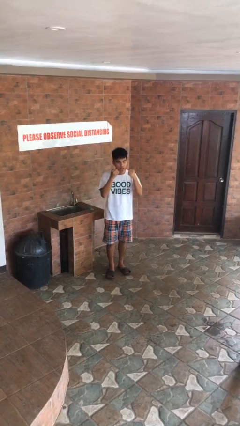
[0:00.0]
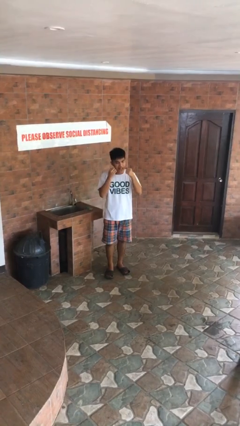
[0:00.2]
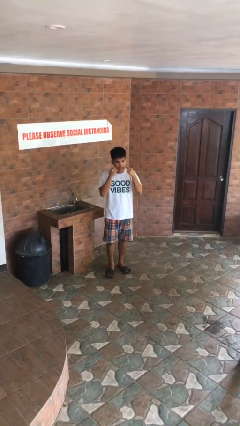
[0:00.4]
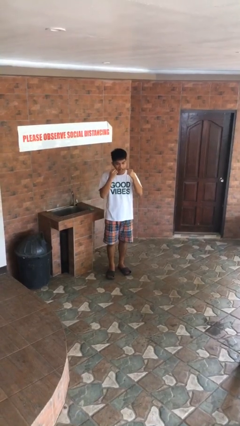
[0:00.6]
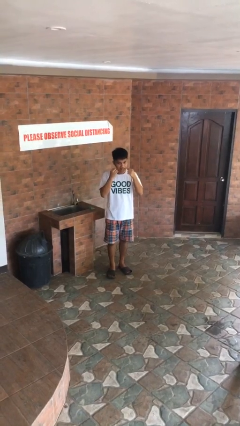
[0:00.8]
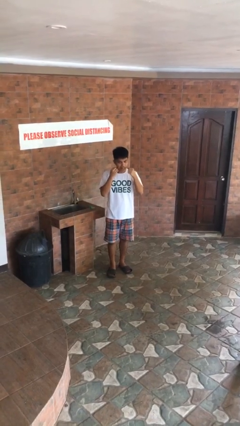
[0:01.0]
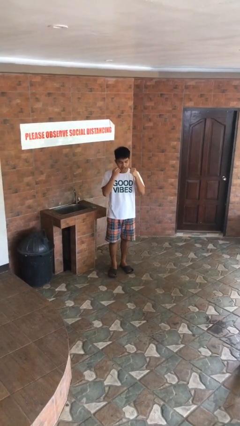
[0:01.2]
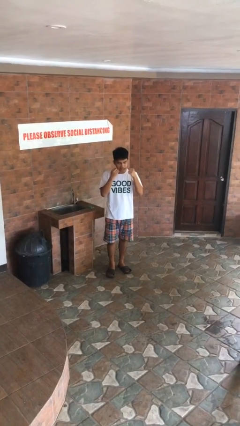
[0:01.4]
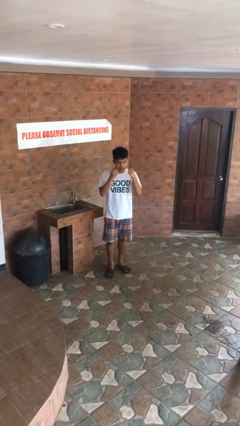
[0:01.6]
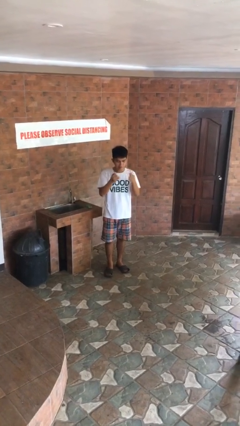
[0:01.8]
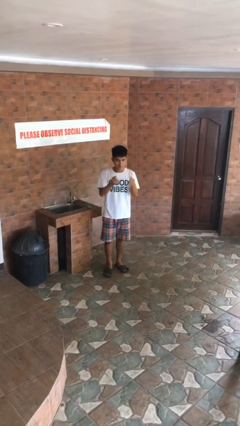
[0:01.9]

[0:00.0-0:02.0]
person flosses

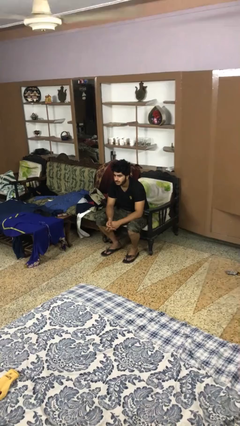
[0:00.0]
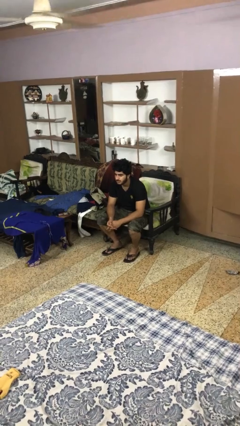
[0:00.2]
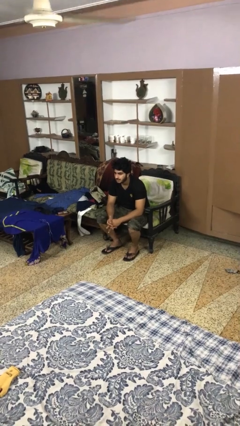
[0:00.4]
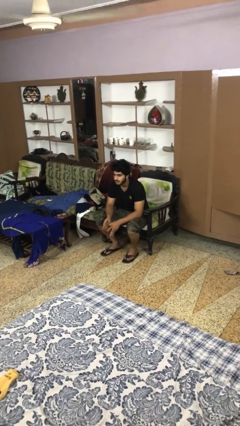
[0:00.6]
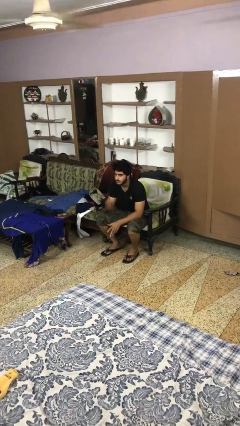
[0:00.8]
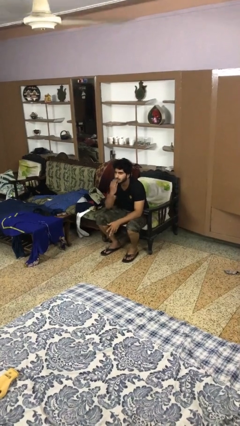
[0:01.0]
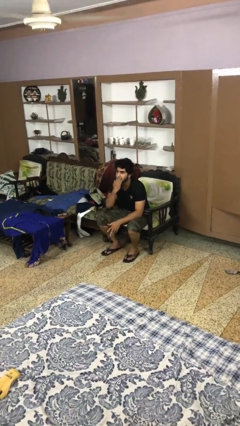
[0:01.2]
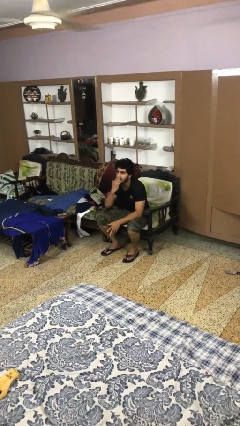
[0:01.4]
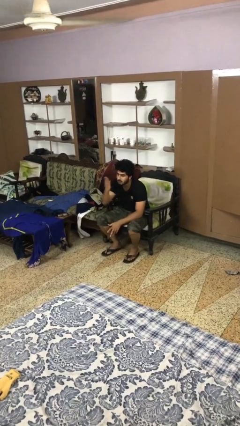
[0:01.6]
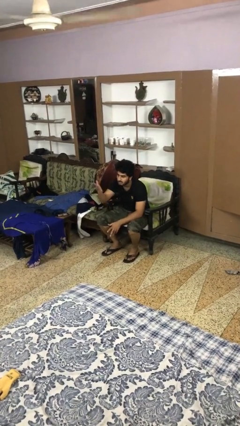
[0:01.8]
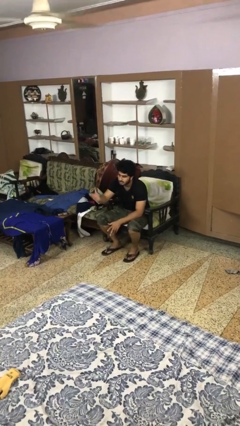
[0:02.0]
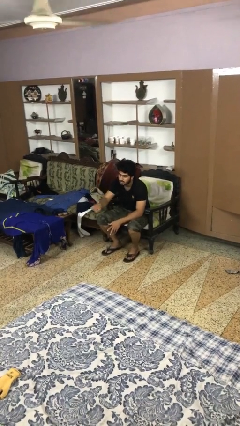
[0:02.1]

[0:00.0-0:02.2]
person gestures blow kiss

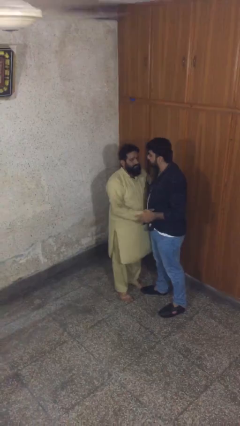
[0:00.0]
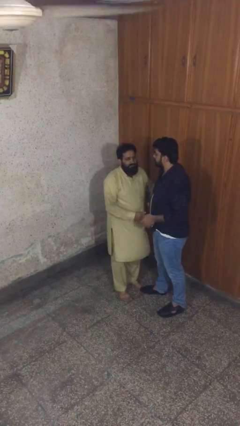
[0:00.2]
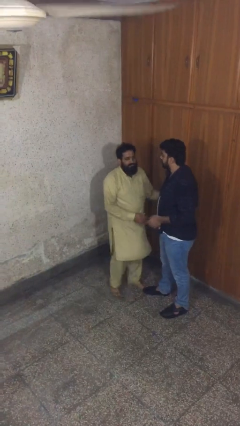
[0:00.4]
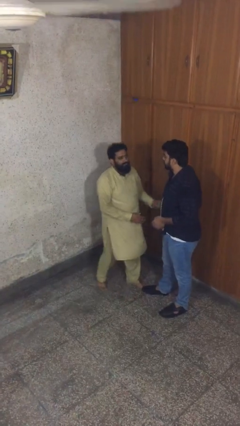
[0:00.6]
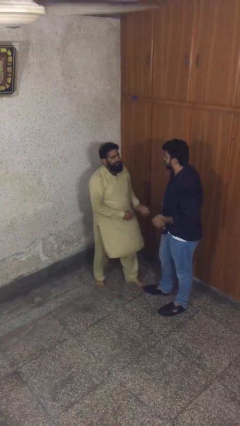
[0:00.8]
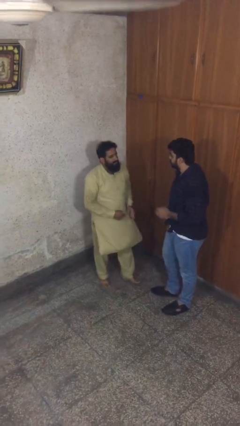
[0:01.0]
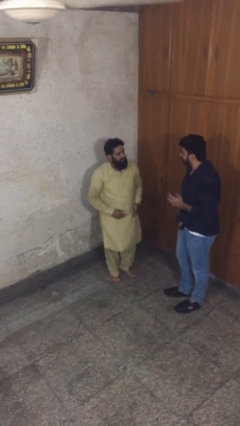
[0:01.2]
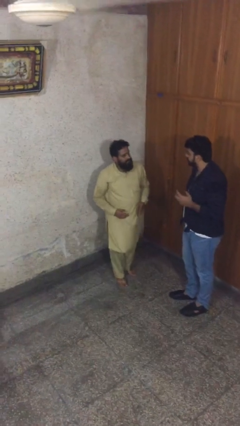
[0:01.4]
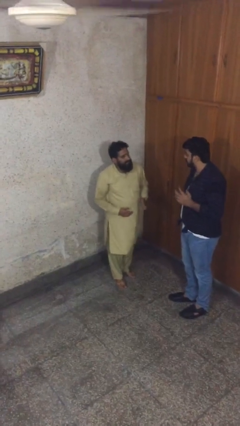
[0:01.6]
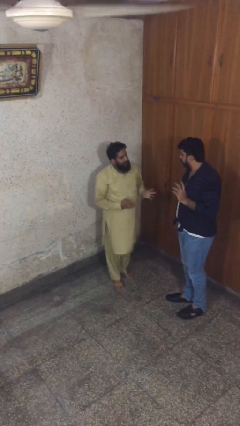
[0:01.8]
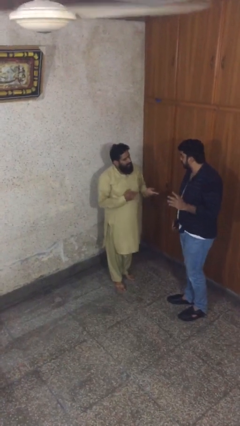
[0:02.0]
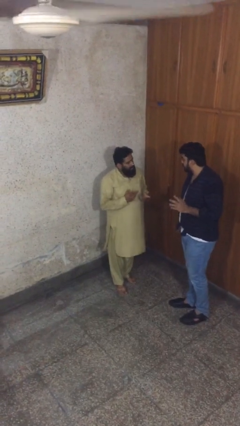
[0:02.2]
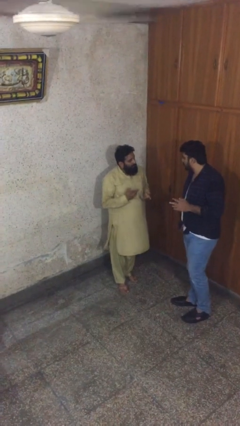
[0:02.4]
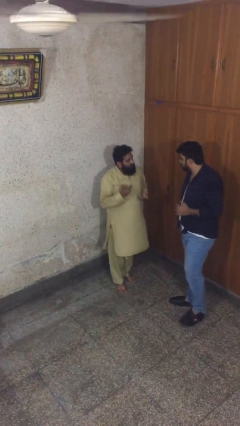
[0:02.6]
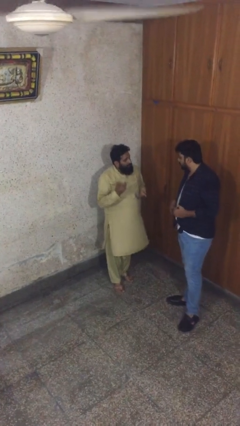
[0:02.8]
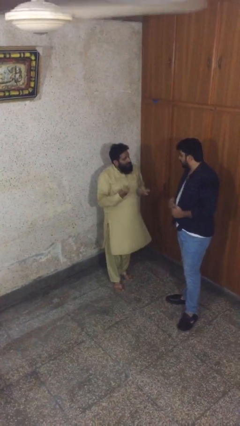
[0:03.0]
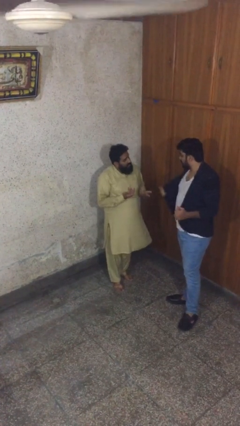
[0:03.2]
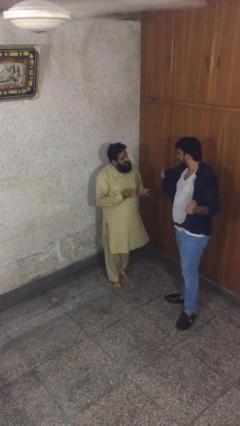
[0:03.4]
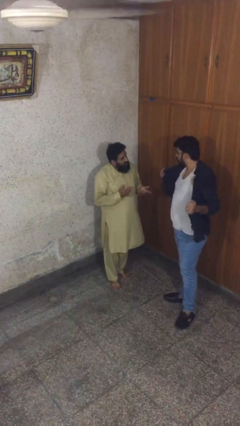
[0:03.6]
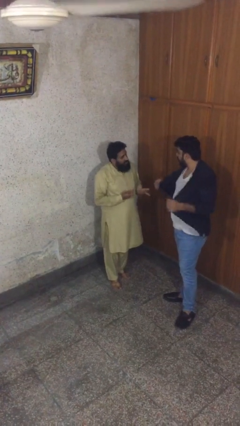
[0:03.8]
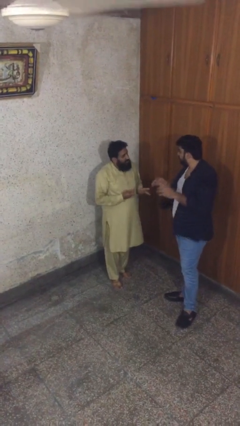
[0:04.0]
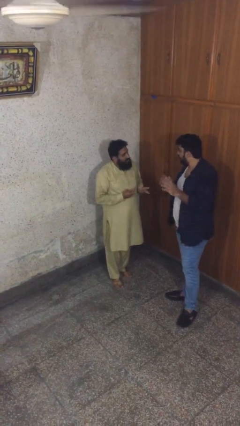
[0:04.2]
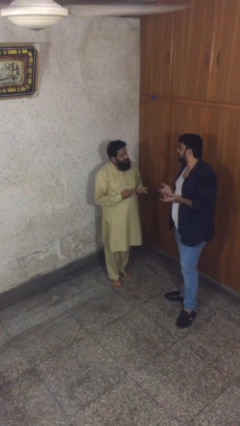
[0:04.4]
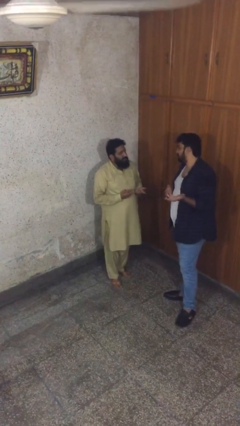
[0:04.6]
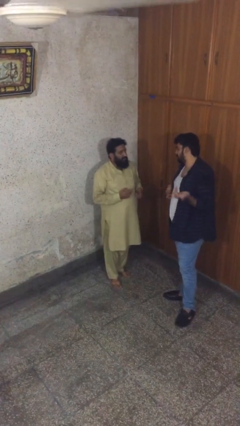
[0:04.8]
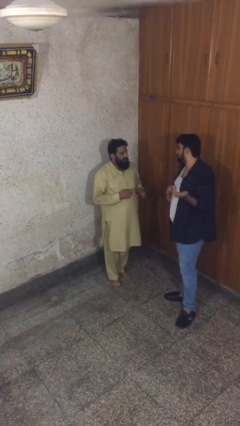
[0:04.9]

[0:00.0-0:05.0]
person talks to person

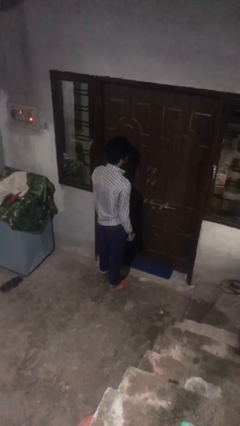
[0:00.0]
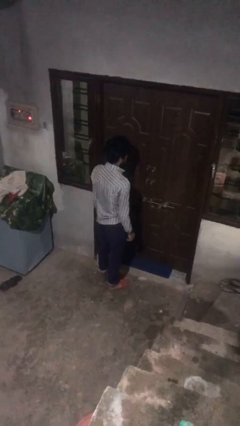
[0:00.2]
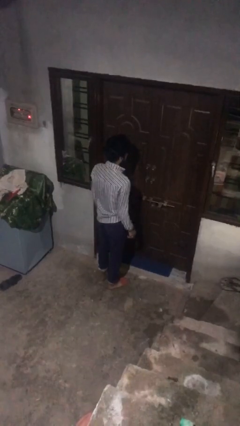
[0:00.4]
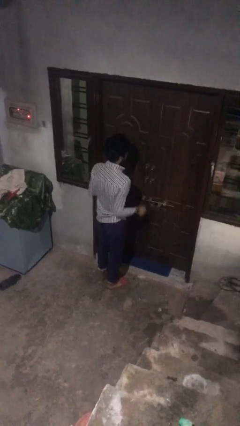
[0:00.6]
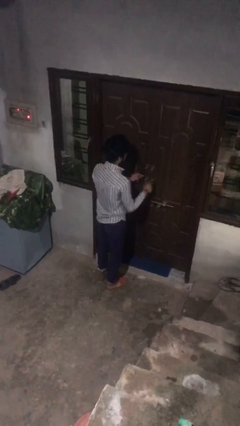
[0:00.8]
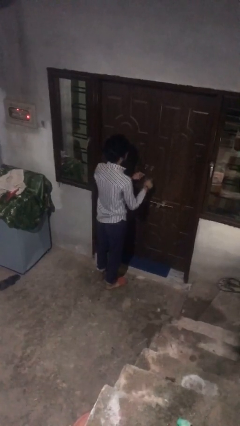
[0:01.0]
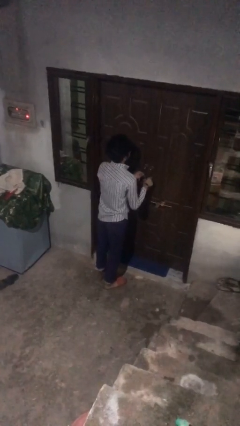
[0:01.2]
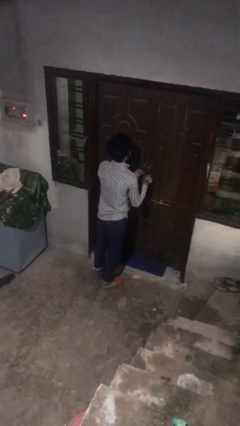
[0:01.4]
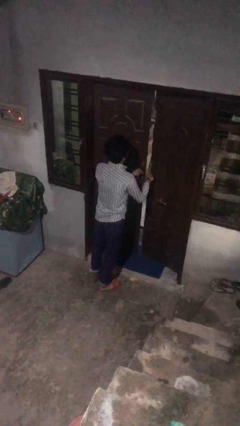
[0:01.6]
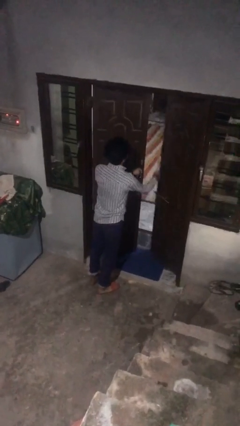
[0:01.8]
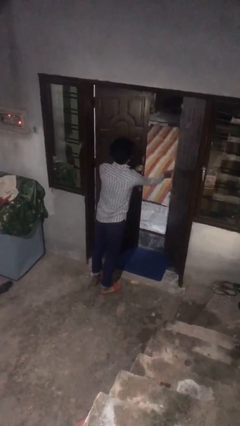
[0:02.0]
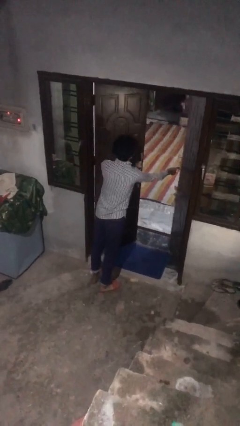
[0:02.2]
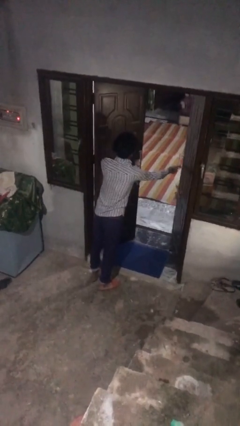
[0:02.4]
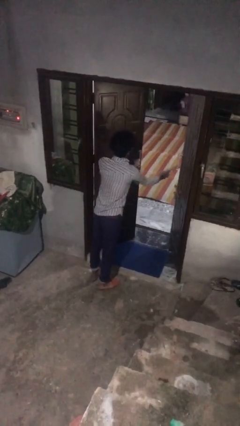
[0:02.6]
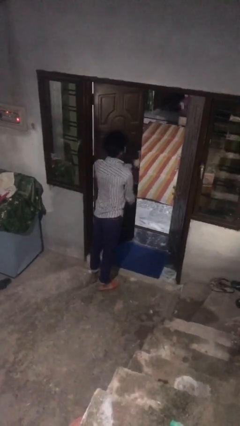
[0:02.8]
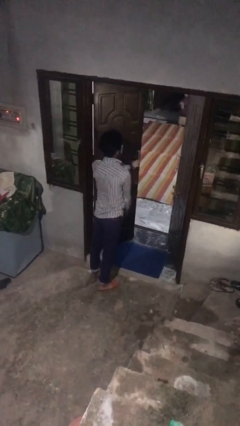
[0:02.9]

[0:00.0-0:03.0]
person opens facility door

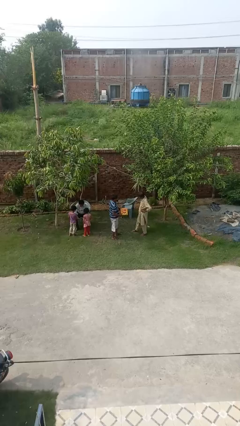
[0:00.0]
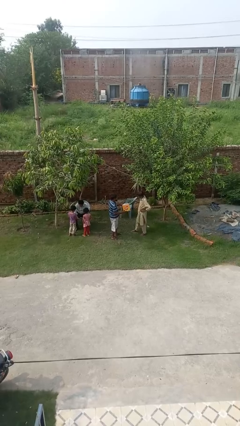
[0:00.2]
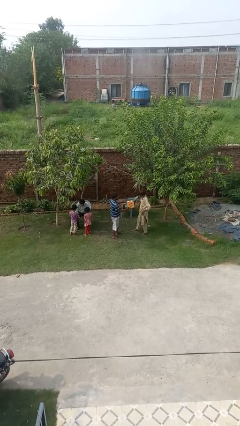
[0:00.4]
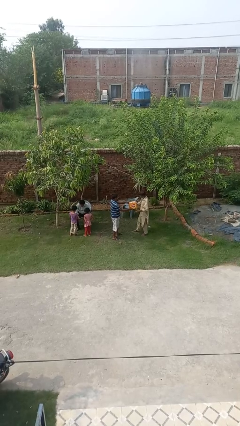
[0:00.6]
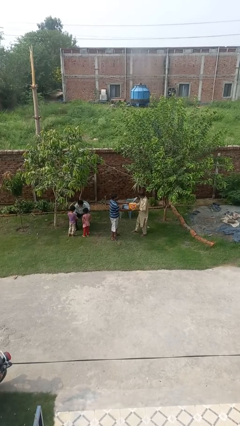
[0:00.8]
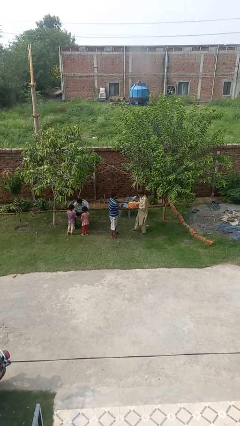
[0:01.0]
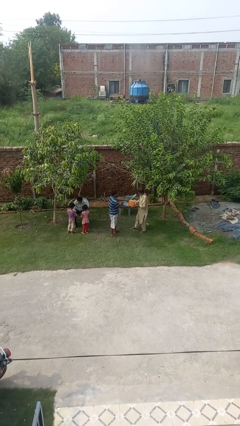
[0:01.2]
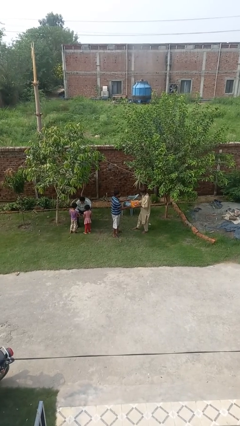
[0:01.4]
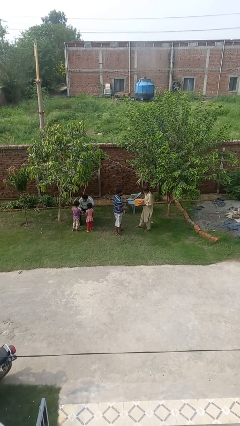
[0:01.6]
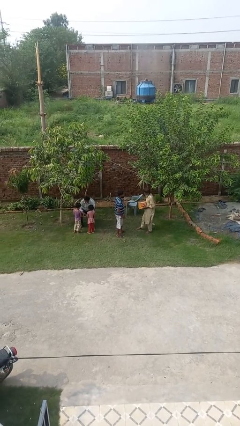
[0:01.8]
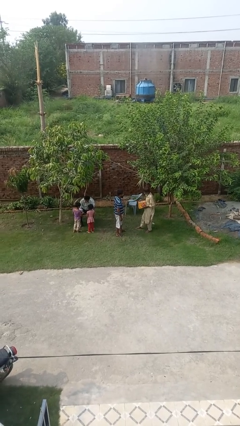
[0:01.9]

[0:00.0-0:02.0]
person transfers object to person

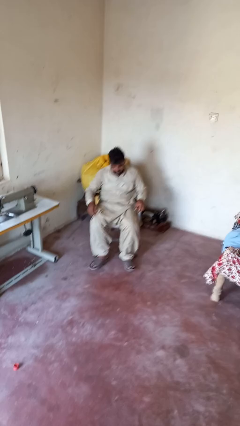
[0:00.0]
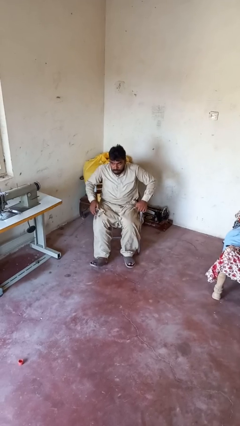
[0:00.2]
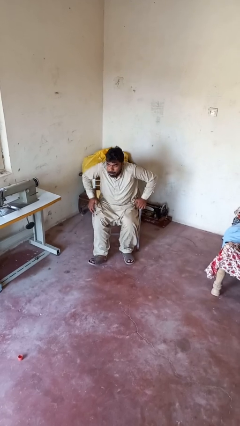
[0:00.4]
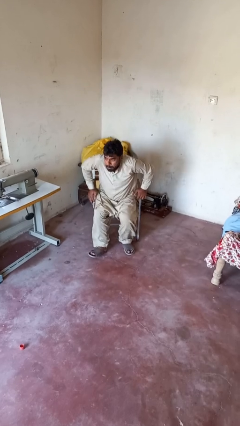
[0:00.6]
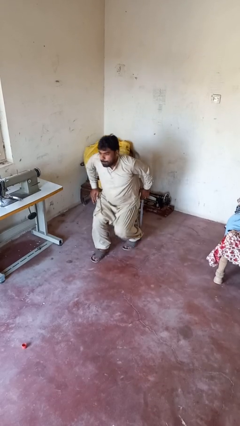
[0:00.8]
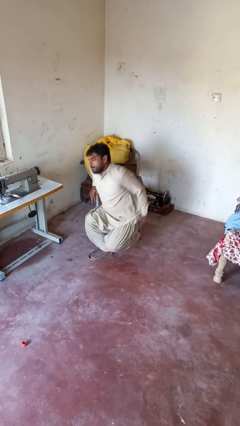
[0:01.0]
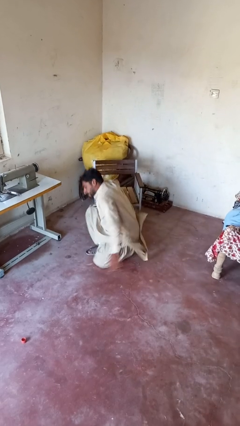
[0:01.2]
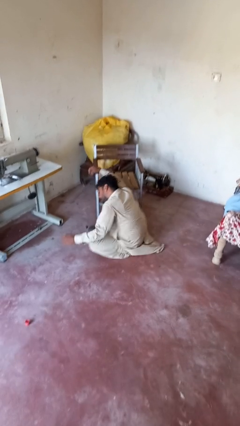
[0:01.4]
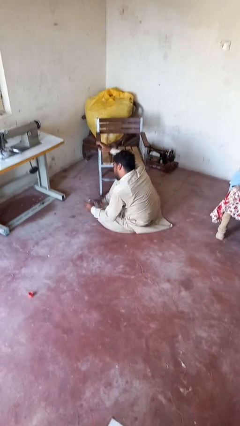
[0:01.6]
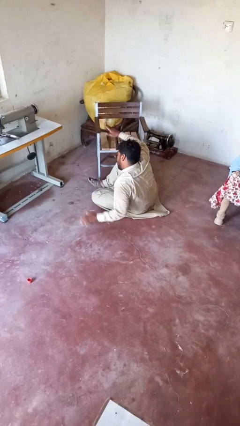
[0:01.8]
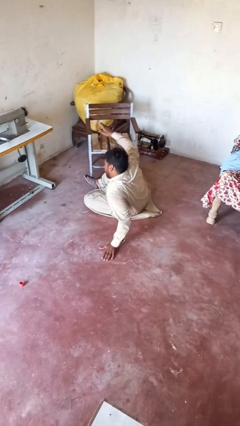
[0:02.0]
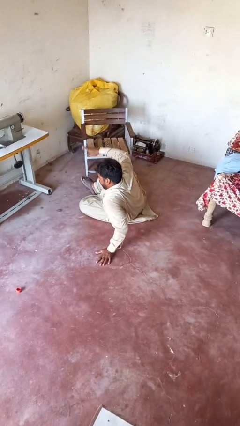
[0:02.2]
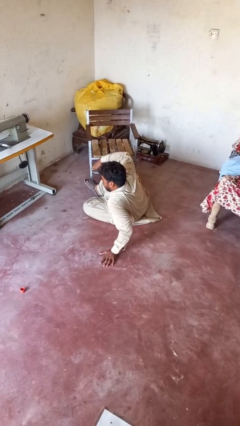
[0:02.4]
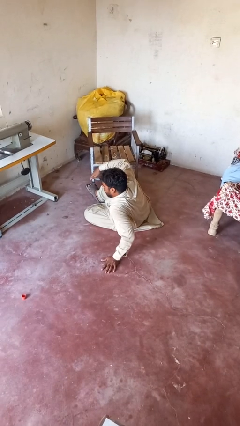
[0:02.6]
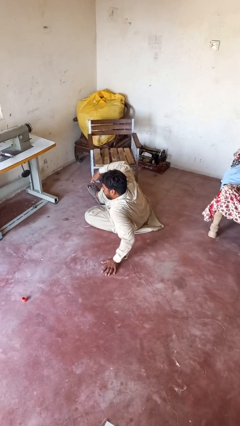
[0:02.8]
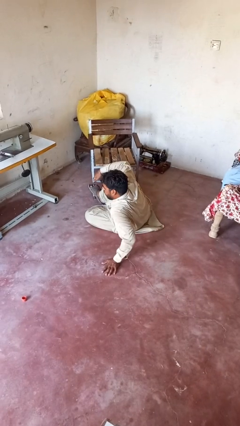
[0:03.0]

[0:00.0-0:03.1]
person falls from chair

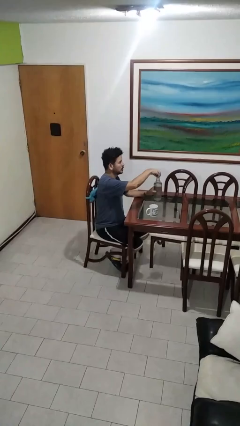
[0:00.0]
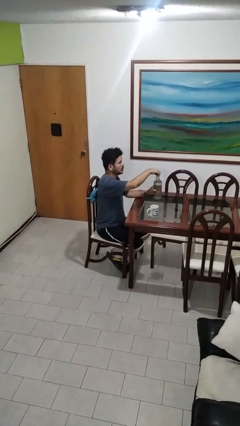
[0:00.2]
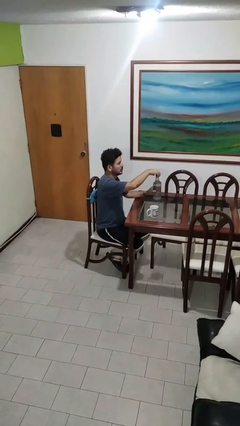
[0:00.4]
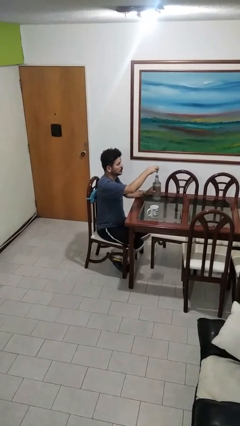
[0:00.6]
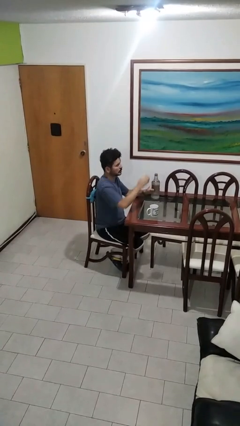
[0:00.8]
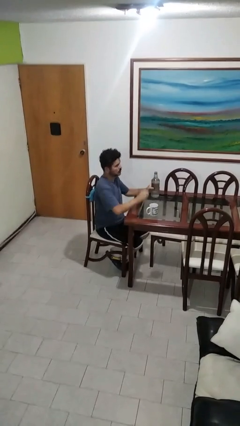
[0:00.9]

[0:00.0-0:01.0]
person unscrews lid from bottle
